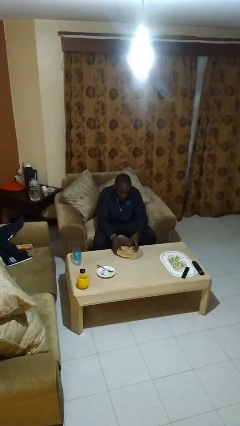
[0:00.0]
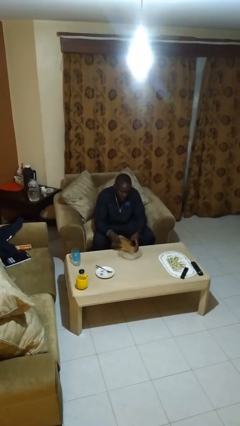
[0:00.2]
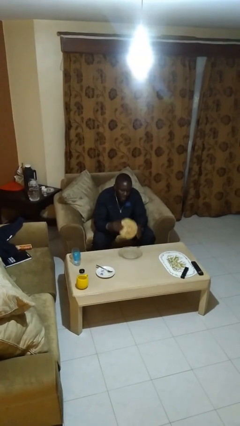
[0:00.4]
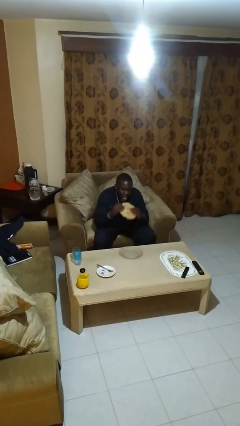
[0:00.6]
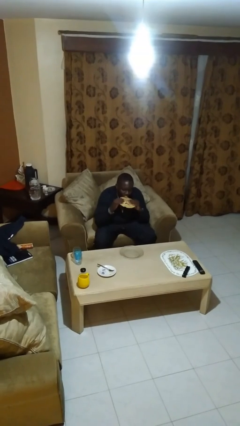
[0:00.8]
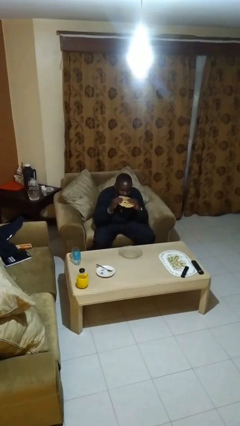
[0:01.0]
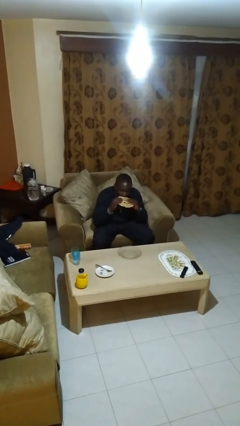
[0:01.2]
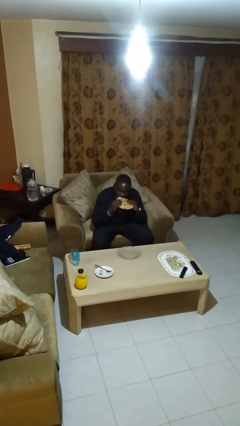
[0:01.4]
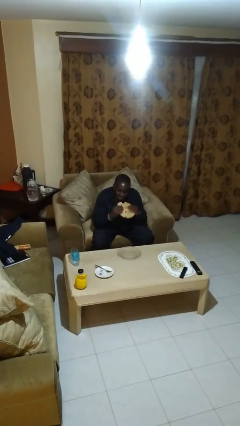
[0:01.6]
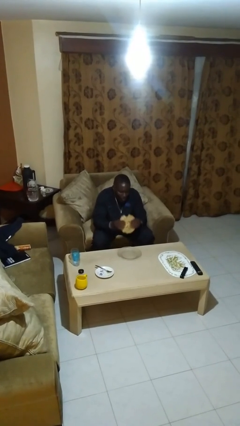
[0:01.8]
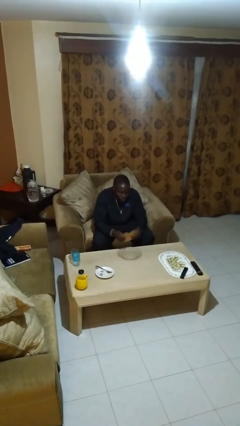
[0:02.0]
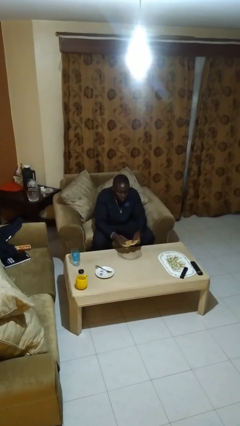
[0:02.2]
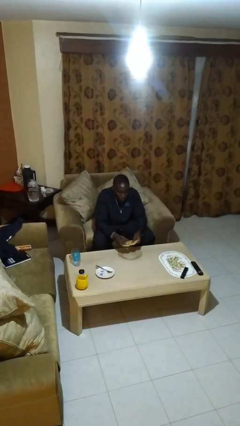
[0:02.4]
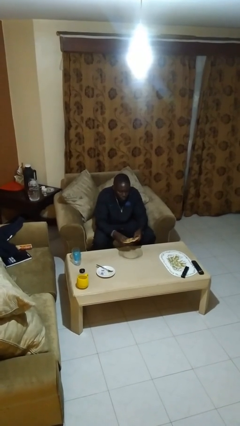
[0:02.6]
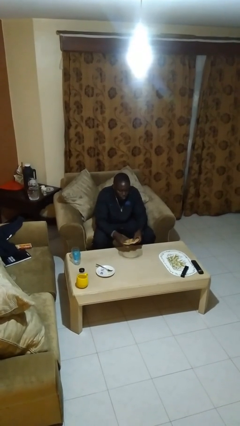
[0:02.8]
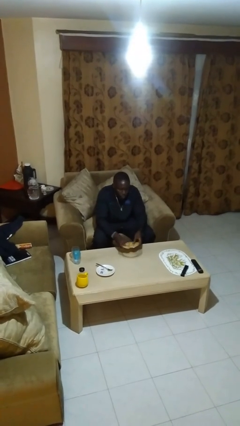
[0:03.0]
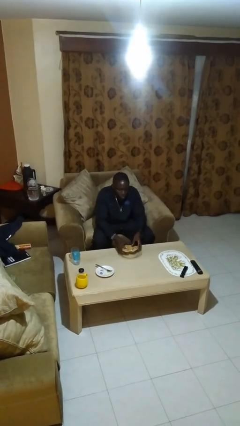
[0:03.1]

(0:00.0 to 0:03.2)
person eats with hands

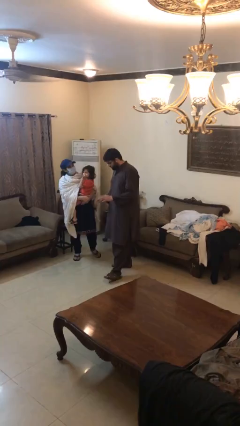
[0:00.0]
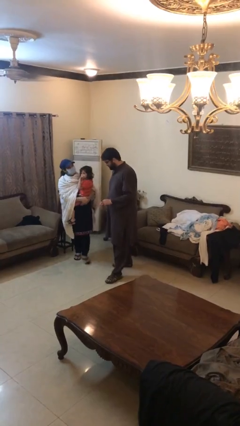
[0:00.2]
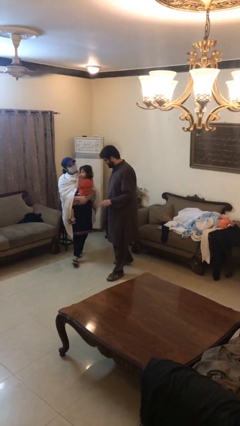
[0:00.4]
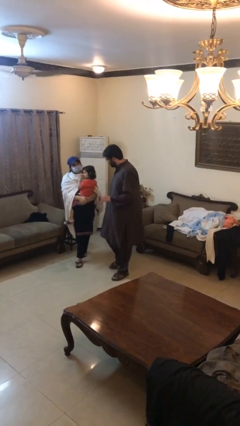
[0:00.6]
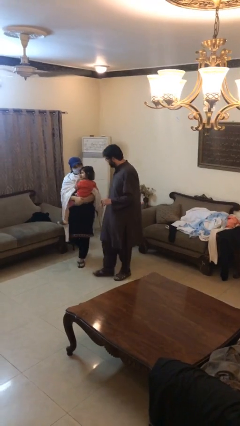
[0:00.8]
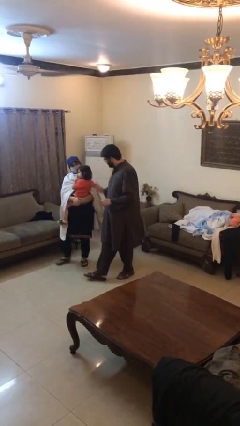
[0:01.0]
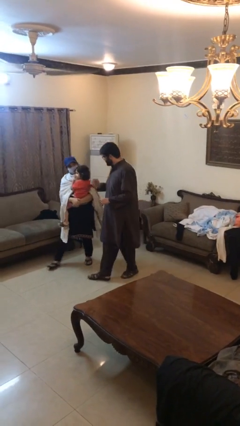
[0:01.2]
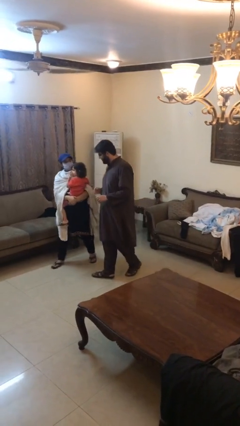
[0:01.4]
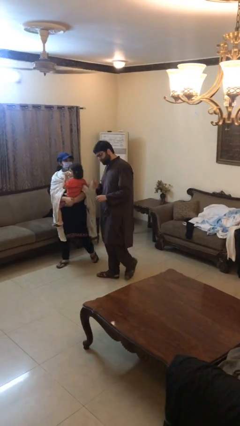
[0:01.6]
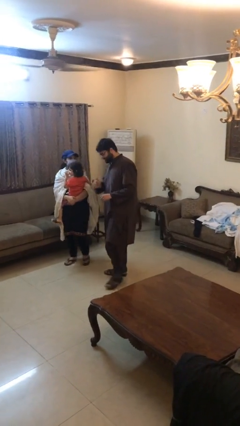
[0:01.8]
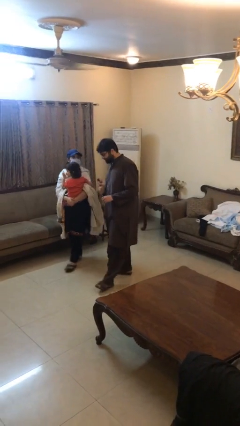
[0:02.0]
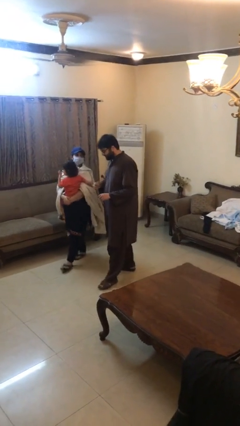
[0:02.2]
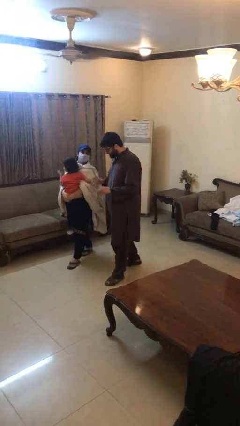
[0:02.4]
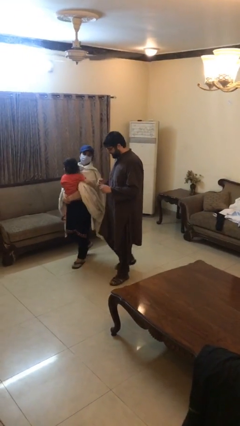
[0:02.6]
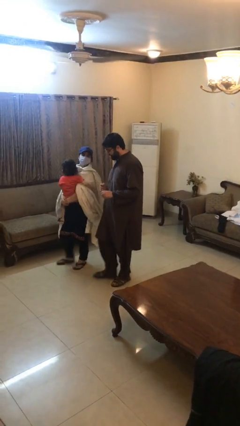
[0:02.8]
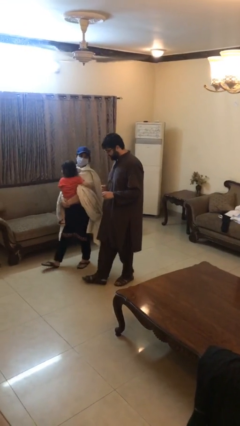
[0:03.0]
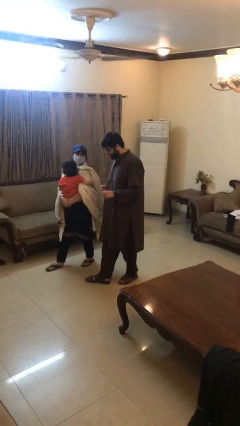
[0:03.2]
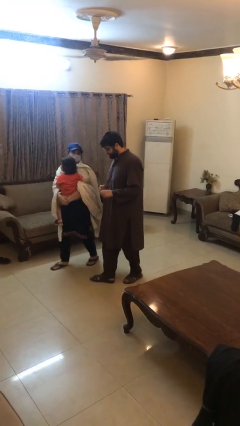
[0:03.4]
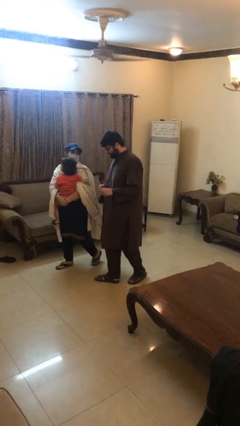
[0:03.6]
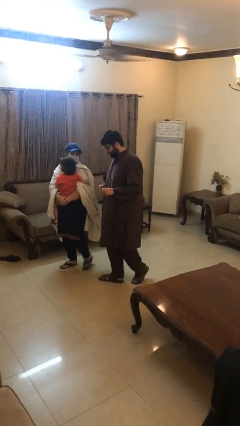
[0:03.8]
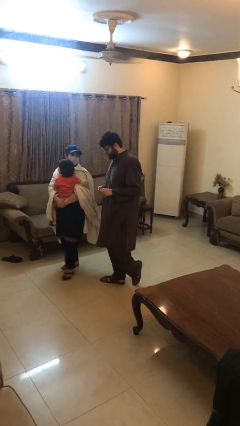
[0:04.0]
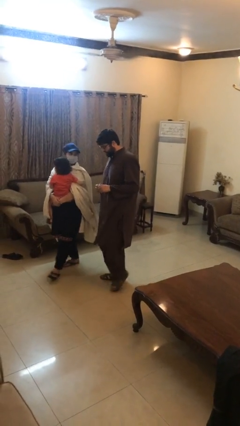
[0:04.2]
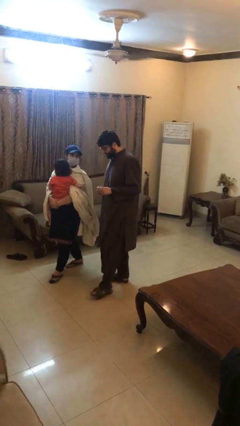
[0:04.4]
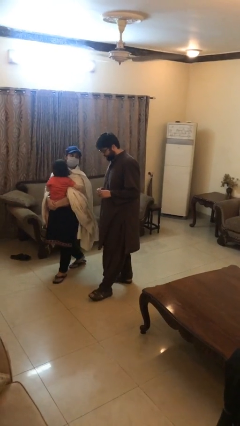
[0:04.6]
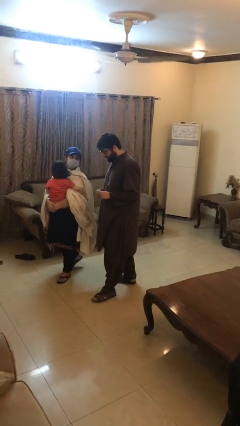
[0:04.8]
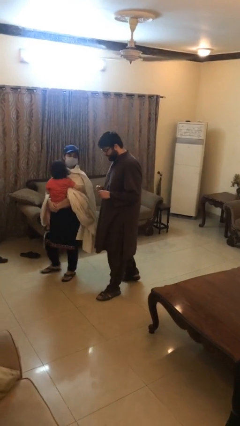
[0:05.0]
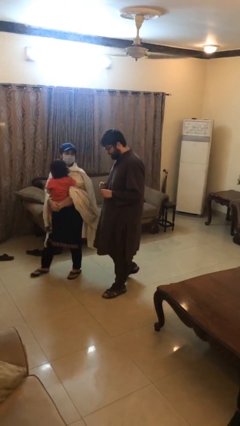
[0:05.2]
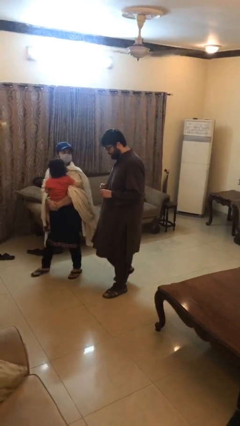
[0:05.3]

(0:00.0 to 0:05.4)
person talks to person

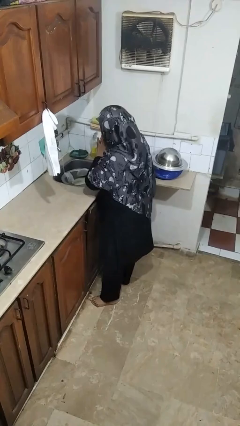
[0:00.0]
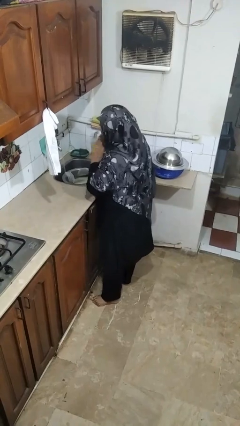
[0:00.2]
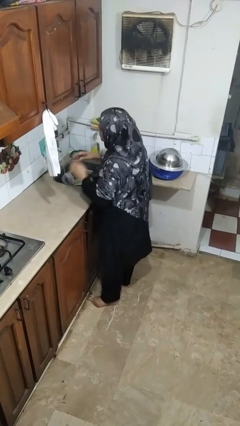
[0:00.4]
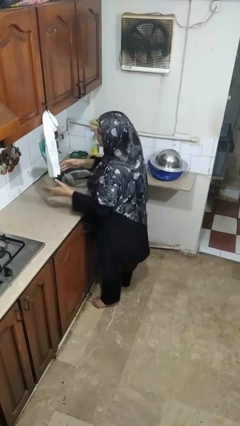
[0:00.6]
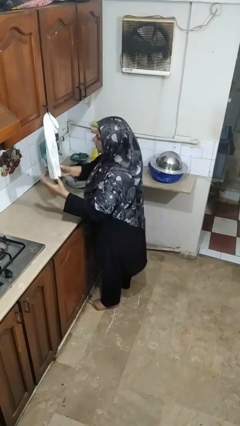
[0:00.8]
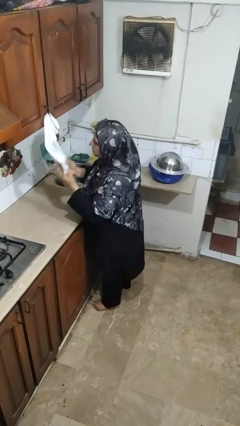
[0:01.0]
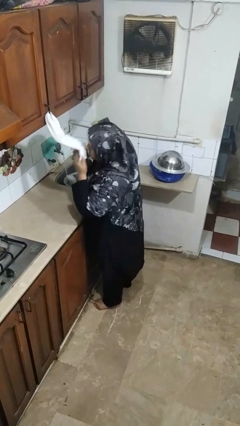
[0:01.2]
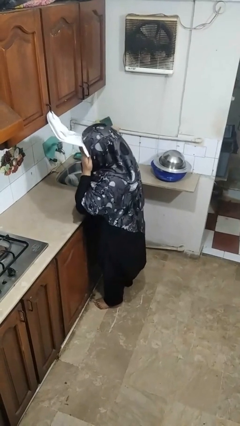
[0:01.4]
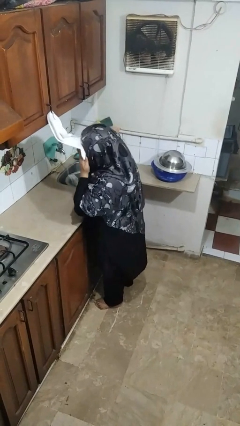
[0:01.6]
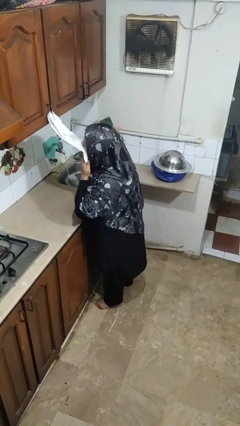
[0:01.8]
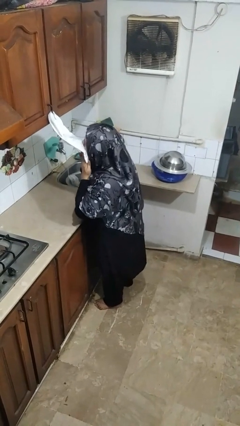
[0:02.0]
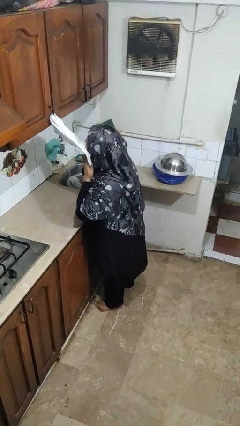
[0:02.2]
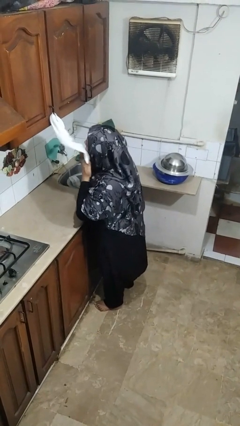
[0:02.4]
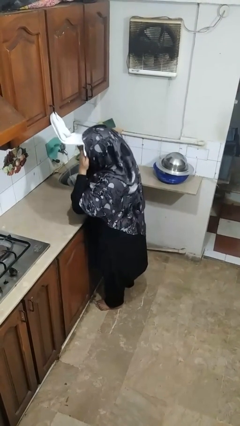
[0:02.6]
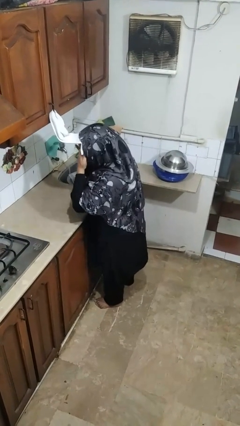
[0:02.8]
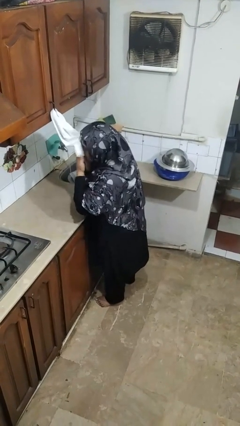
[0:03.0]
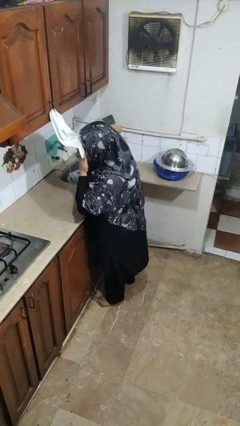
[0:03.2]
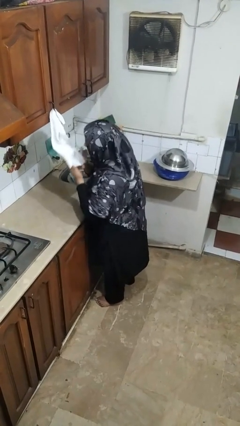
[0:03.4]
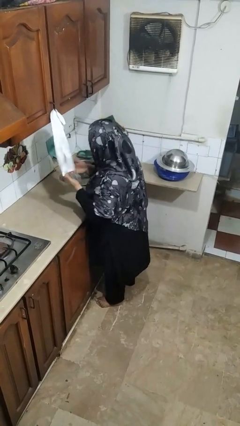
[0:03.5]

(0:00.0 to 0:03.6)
person dries face with towel

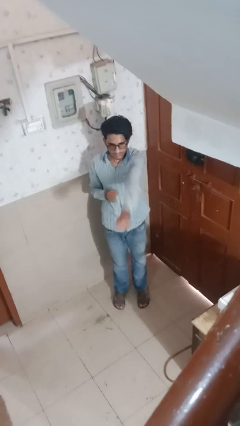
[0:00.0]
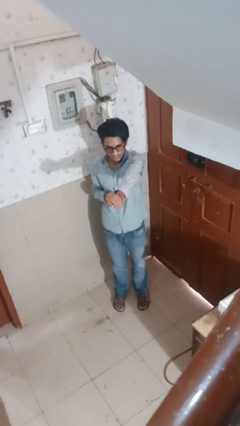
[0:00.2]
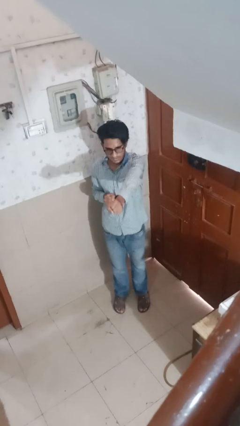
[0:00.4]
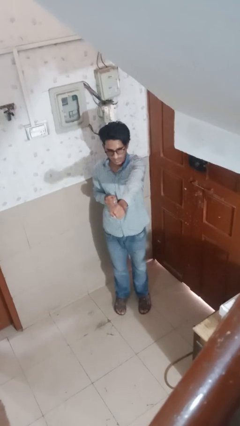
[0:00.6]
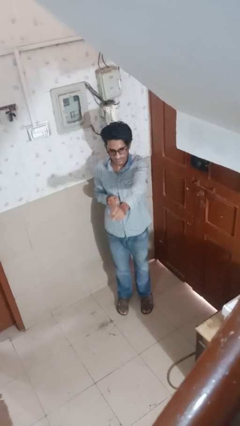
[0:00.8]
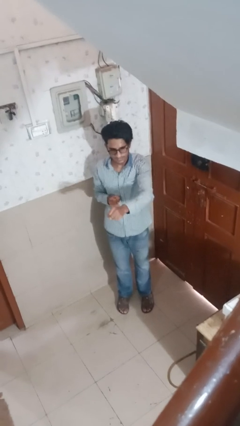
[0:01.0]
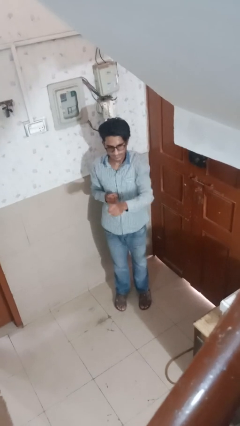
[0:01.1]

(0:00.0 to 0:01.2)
person punches

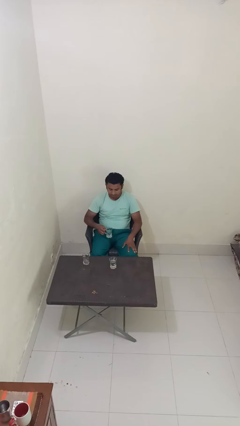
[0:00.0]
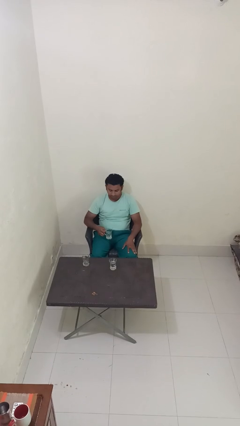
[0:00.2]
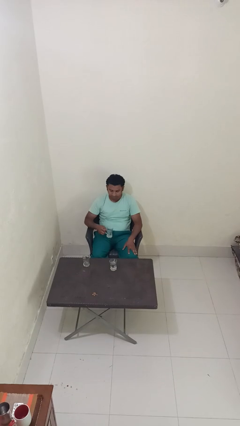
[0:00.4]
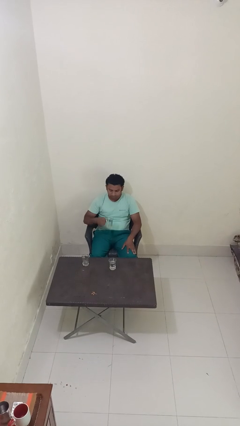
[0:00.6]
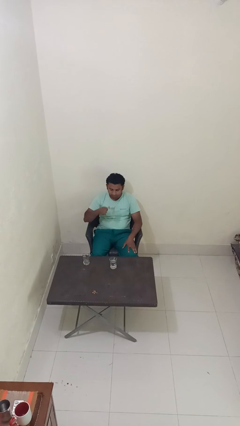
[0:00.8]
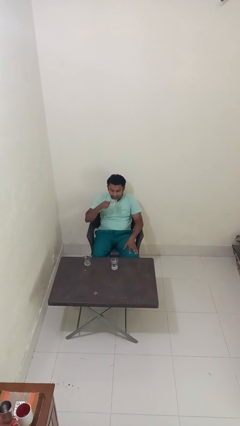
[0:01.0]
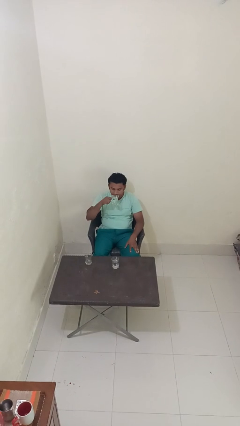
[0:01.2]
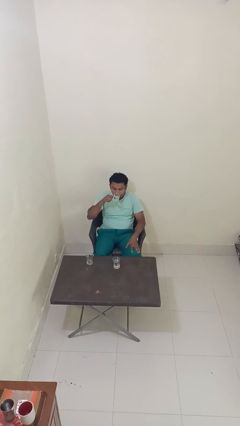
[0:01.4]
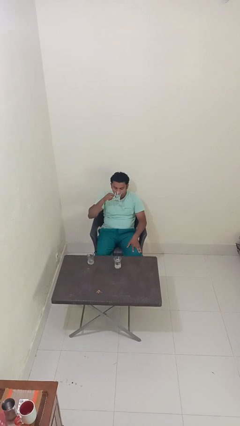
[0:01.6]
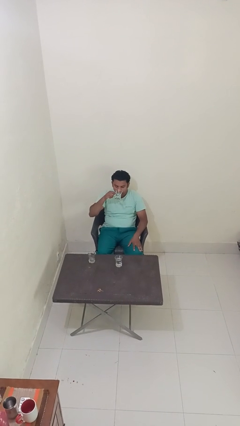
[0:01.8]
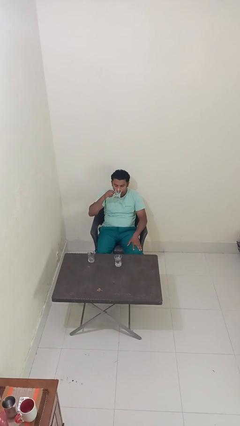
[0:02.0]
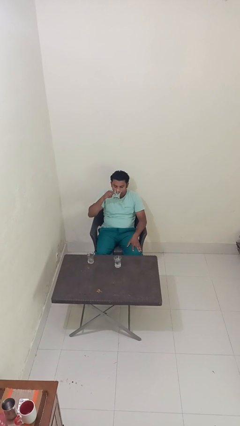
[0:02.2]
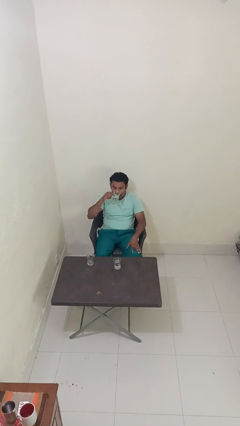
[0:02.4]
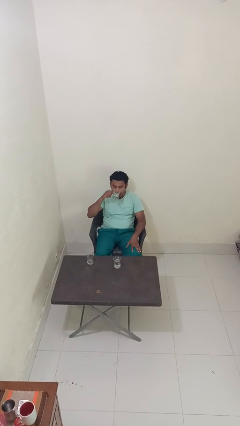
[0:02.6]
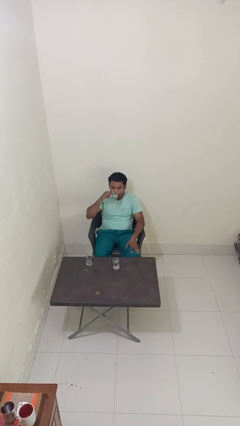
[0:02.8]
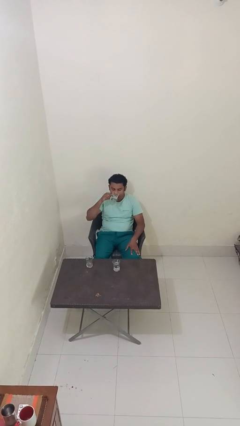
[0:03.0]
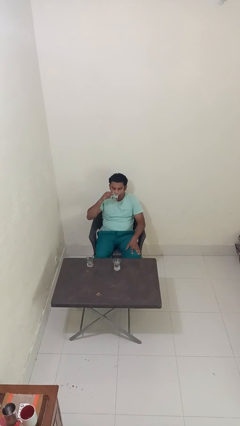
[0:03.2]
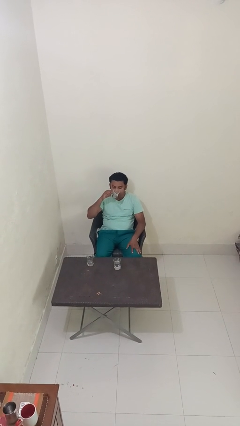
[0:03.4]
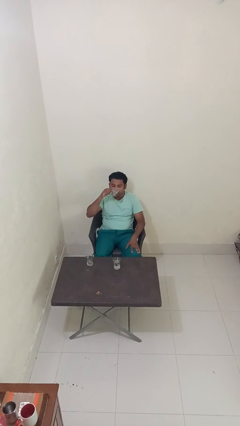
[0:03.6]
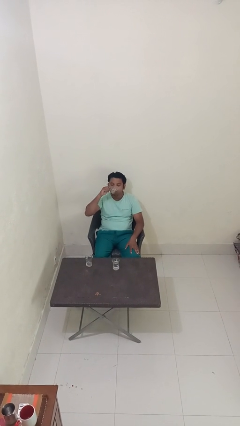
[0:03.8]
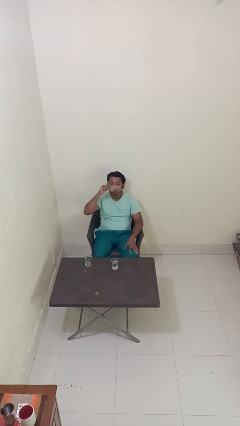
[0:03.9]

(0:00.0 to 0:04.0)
person drinks from shotglass

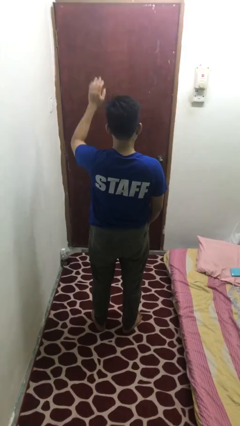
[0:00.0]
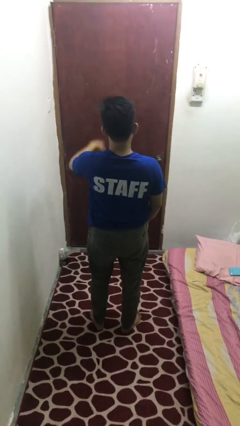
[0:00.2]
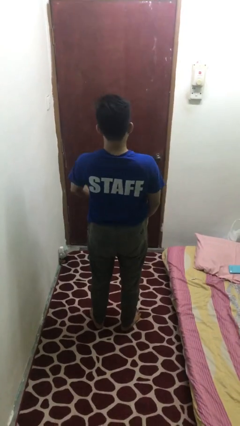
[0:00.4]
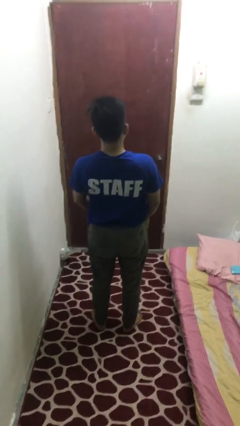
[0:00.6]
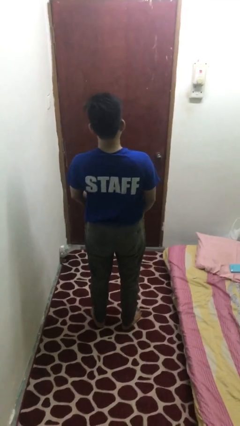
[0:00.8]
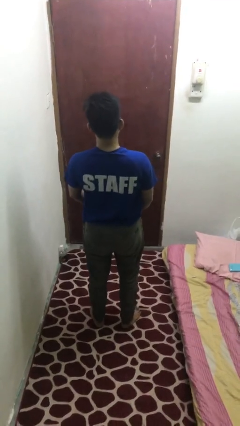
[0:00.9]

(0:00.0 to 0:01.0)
person gestures swipe down
